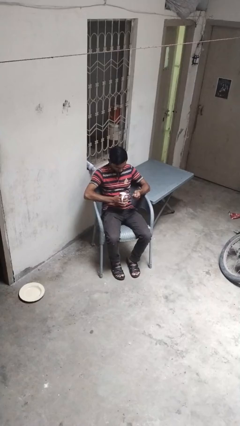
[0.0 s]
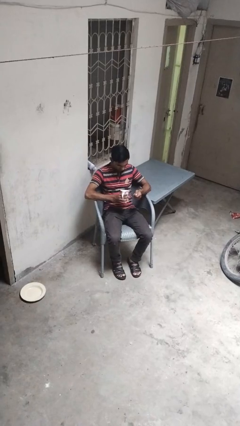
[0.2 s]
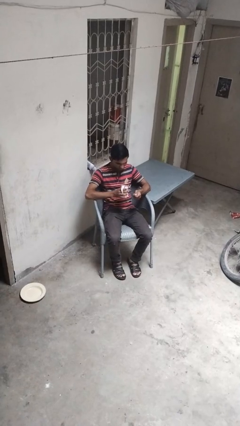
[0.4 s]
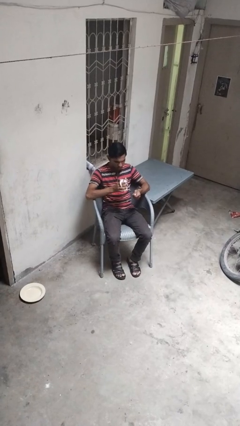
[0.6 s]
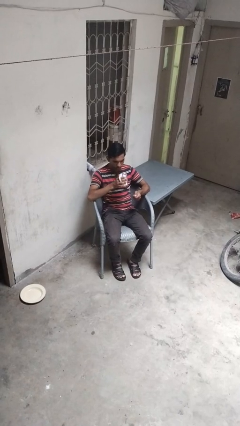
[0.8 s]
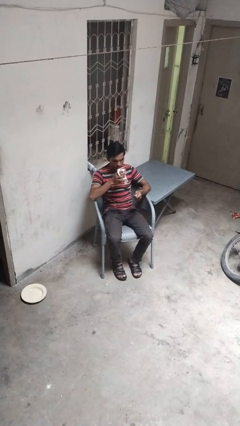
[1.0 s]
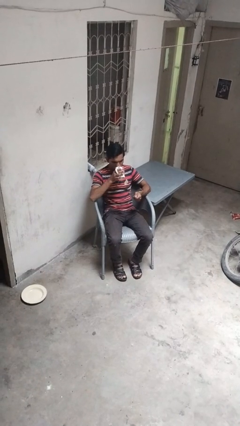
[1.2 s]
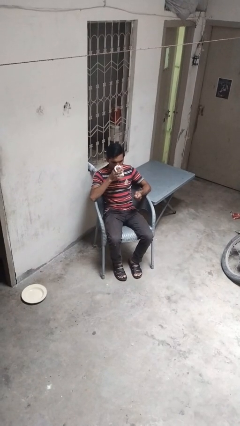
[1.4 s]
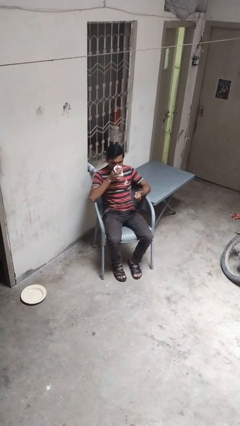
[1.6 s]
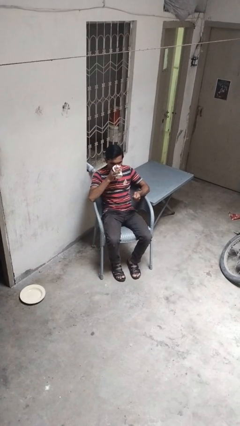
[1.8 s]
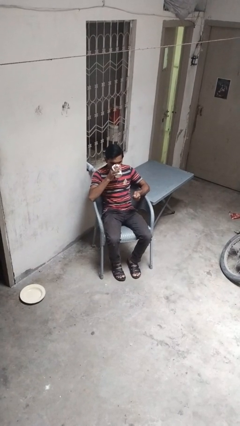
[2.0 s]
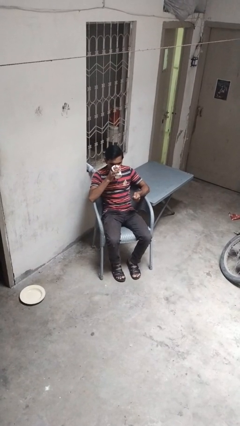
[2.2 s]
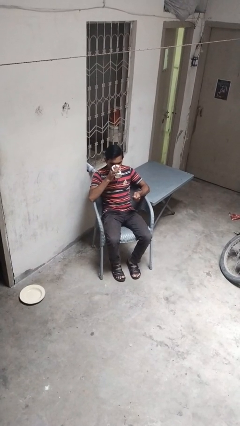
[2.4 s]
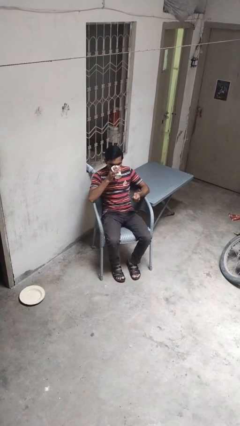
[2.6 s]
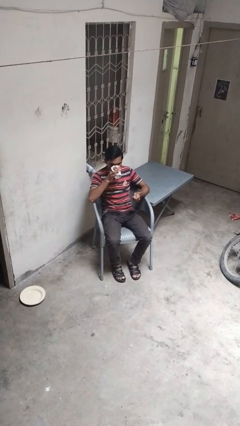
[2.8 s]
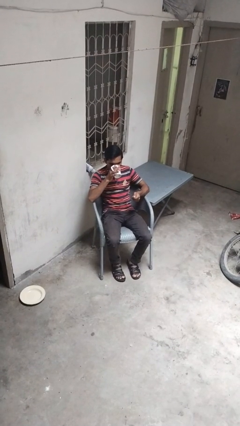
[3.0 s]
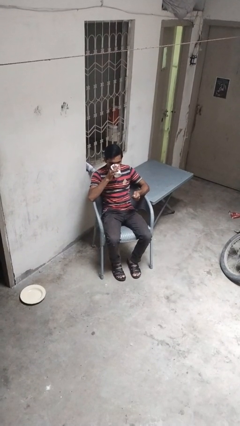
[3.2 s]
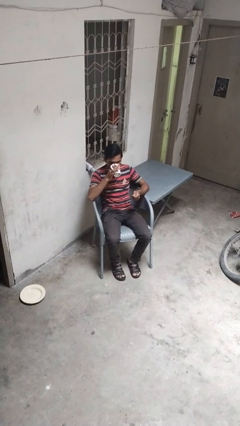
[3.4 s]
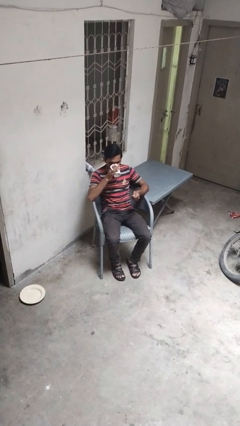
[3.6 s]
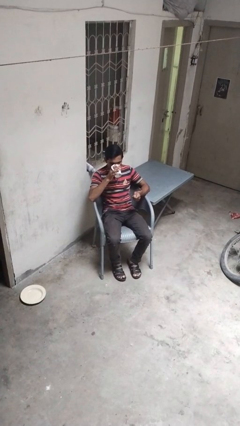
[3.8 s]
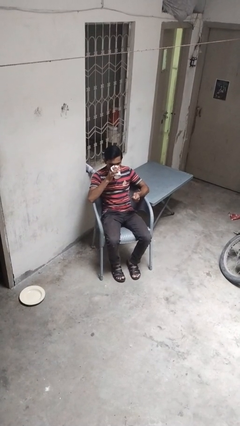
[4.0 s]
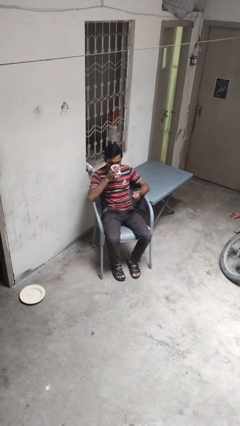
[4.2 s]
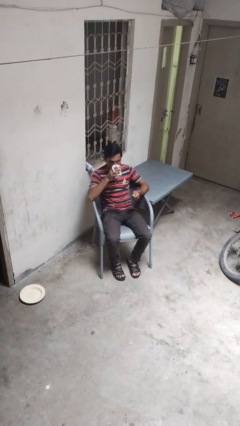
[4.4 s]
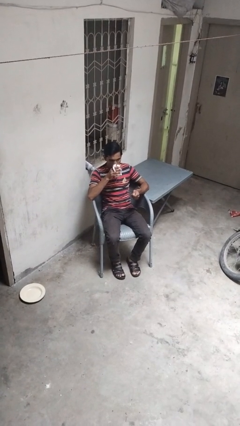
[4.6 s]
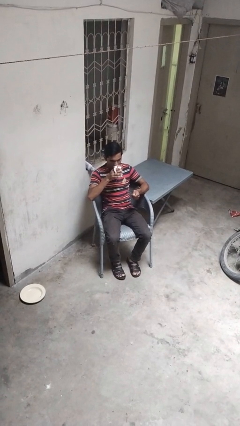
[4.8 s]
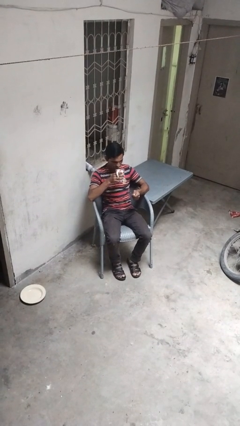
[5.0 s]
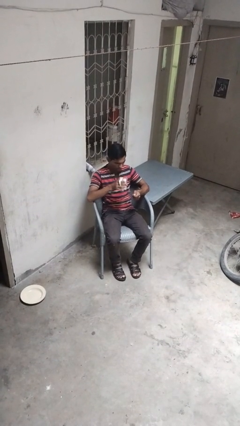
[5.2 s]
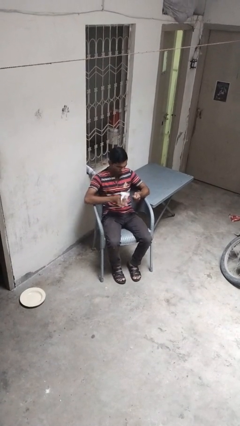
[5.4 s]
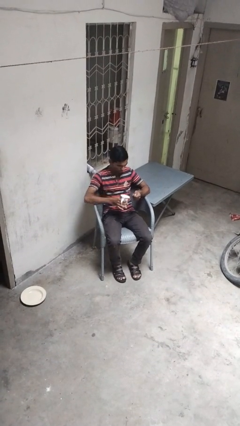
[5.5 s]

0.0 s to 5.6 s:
person drinks from mug

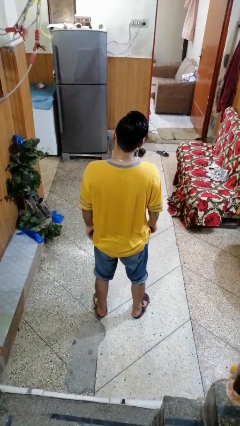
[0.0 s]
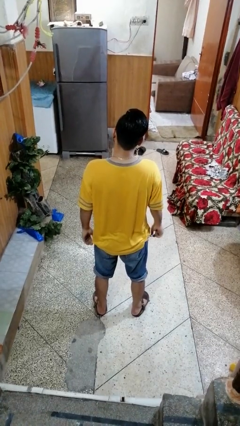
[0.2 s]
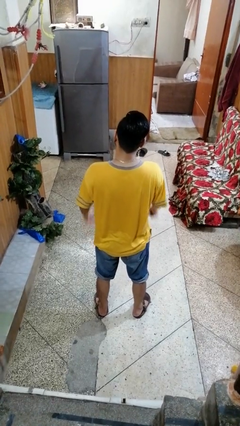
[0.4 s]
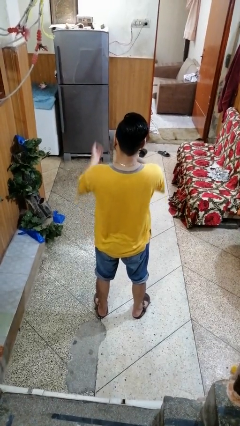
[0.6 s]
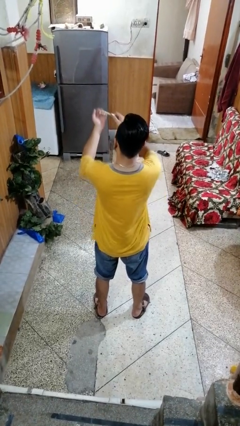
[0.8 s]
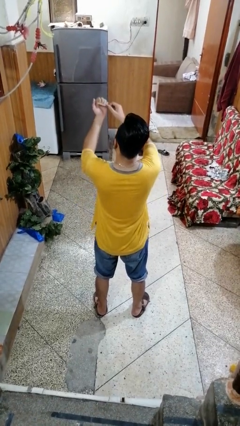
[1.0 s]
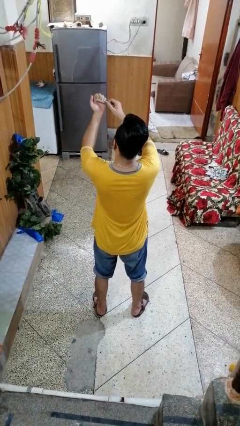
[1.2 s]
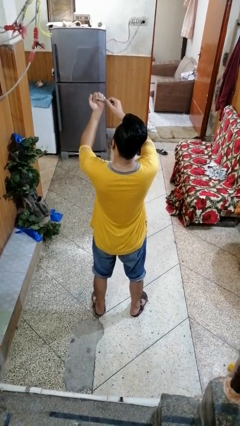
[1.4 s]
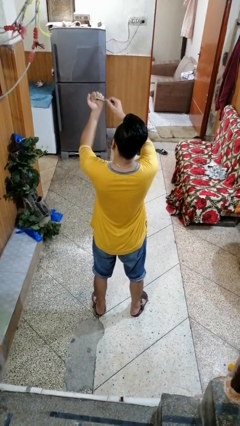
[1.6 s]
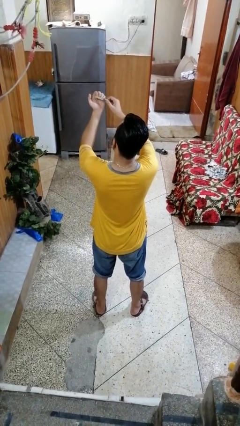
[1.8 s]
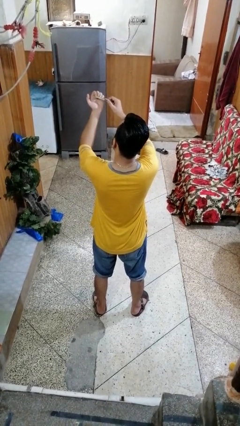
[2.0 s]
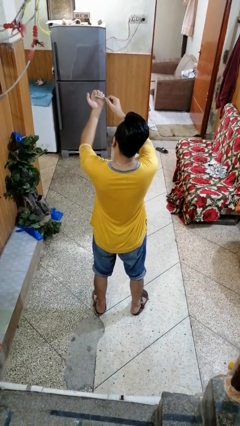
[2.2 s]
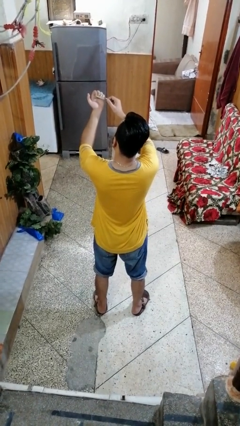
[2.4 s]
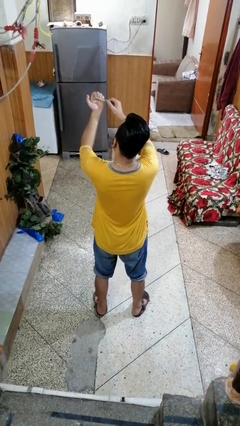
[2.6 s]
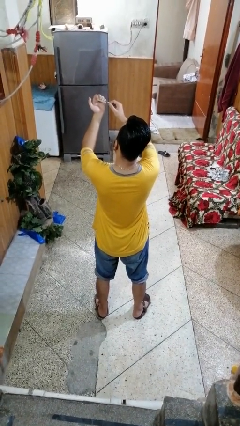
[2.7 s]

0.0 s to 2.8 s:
person files fingernails

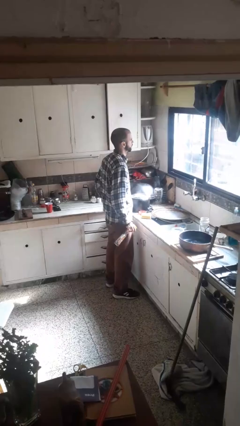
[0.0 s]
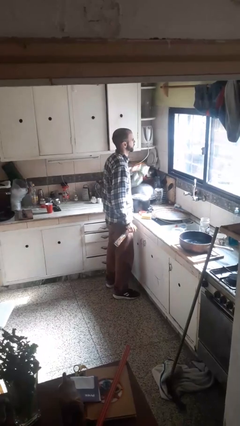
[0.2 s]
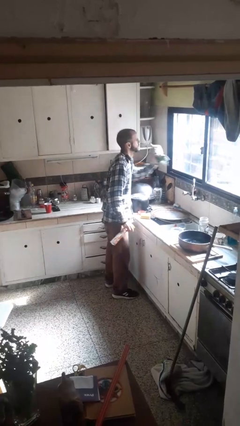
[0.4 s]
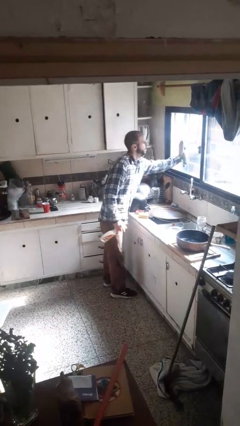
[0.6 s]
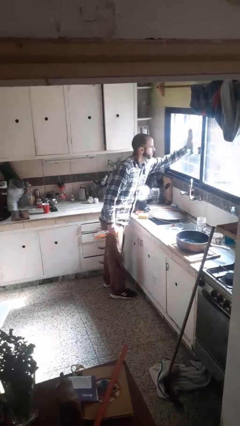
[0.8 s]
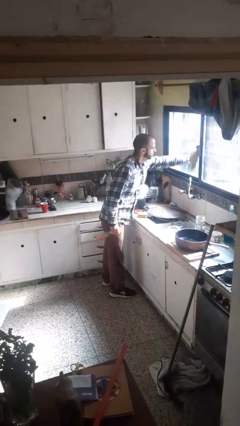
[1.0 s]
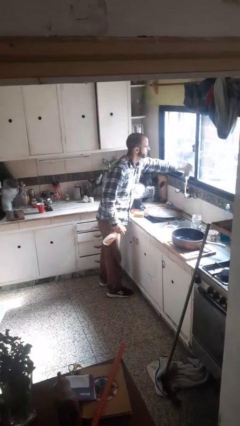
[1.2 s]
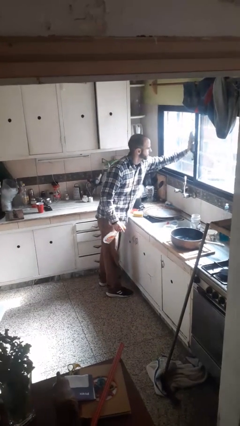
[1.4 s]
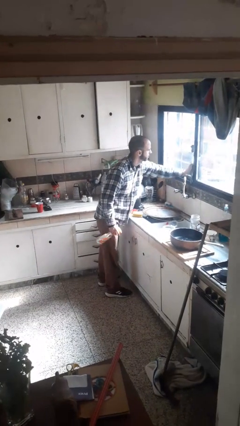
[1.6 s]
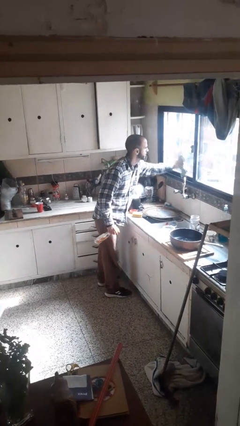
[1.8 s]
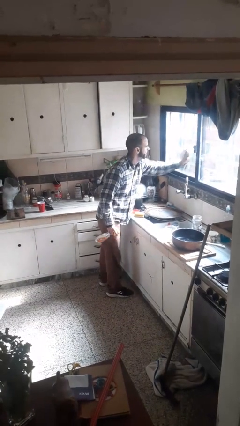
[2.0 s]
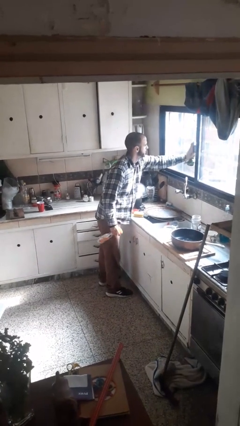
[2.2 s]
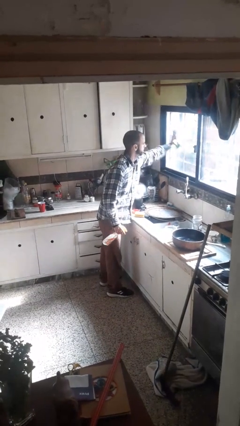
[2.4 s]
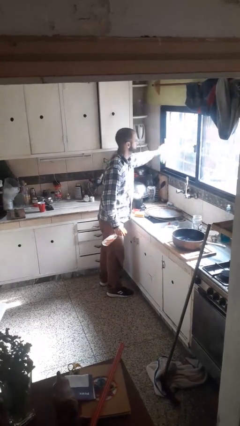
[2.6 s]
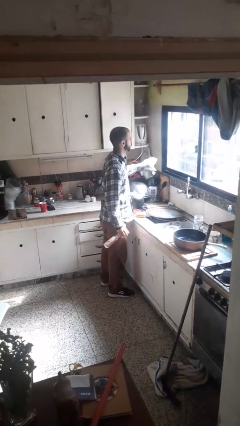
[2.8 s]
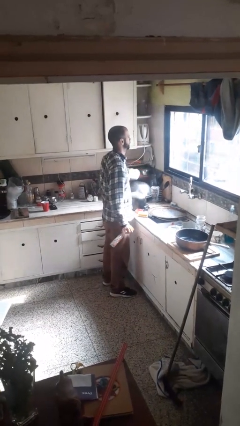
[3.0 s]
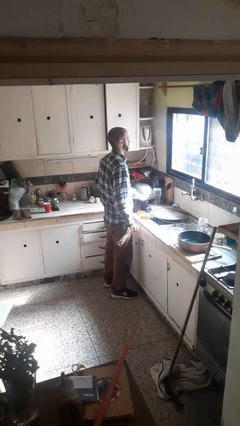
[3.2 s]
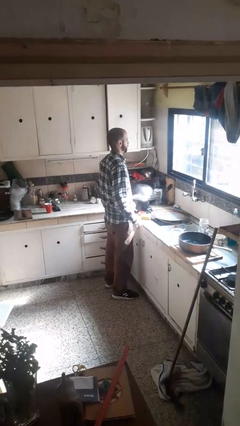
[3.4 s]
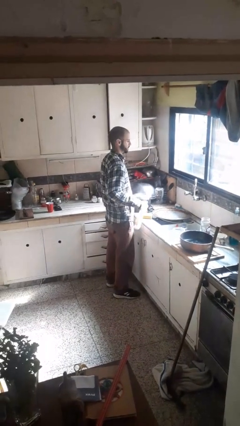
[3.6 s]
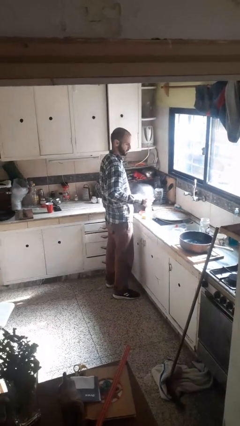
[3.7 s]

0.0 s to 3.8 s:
person washes window

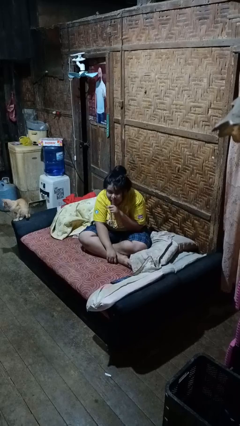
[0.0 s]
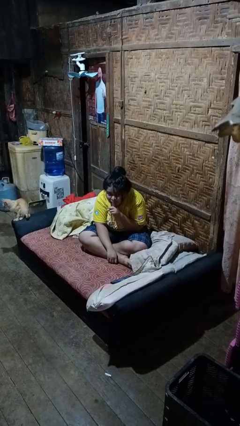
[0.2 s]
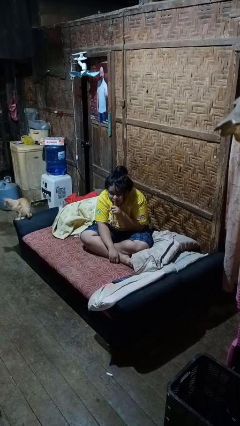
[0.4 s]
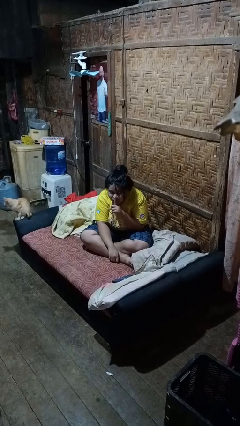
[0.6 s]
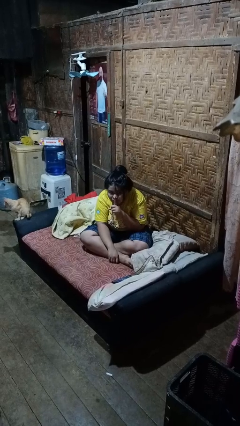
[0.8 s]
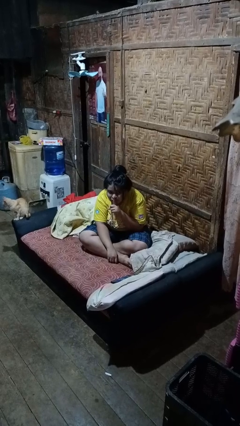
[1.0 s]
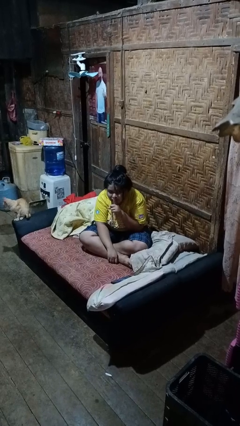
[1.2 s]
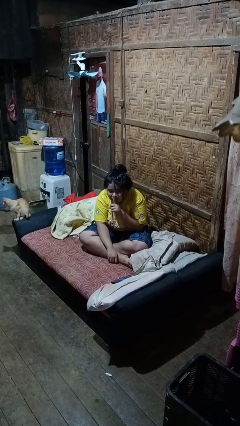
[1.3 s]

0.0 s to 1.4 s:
person gestures be quiet

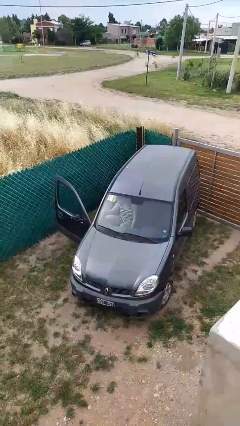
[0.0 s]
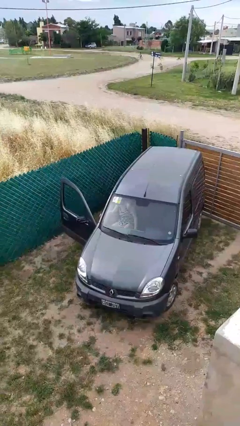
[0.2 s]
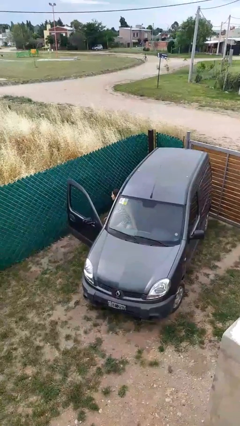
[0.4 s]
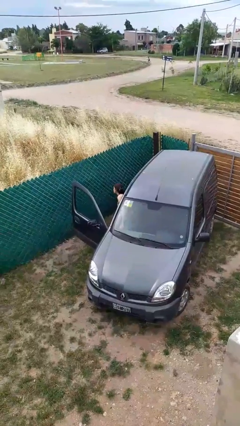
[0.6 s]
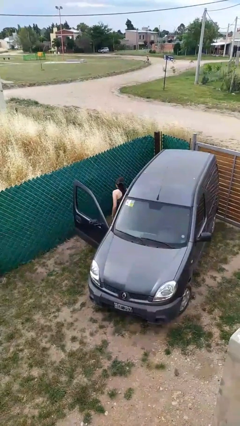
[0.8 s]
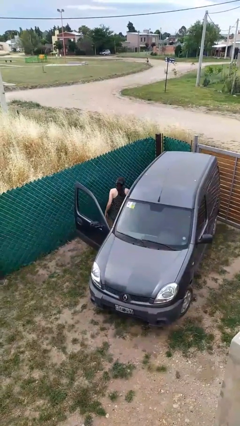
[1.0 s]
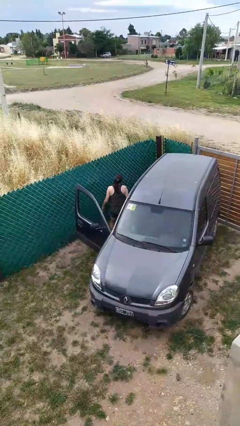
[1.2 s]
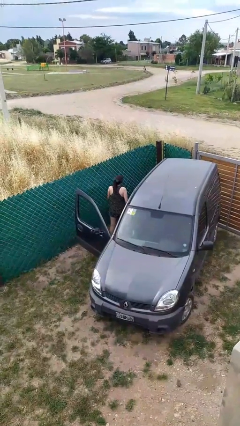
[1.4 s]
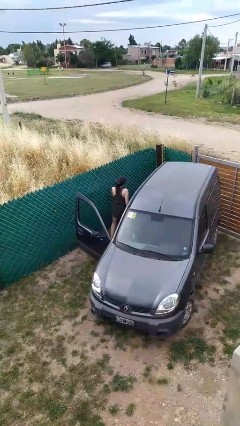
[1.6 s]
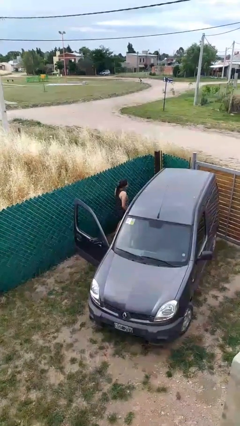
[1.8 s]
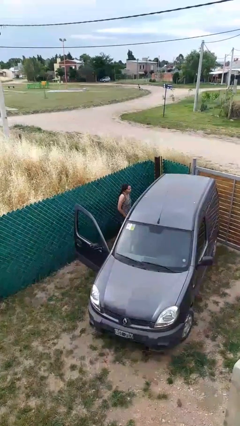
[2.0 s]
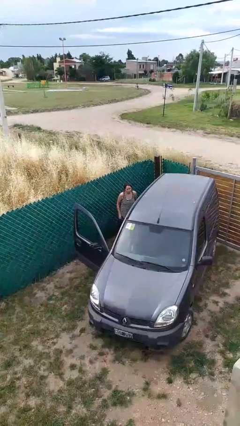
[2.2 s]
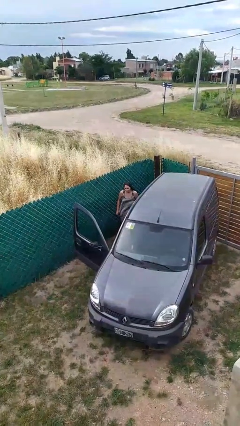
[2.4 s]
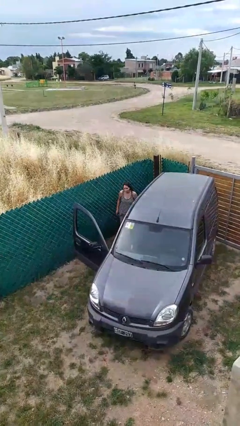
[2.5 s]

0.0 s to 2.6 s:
person exits car

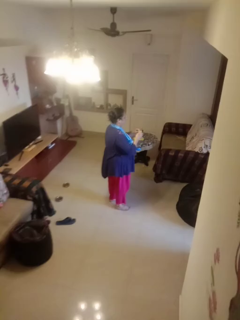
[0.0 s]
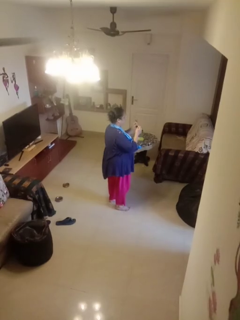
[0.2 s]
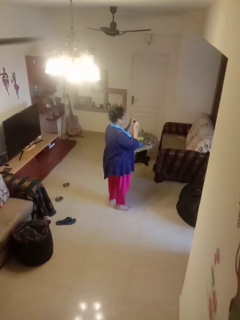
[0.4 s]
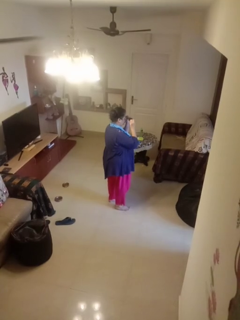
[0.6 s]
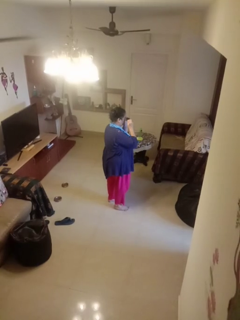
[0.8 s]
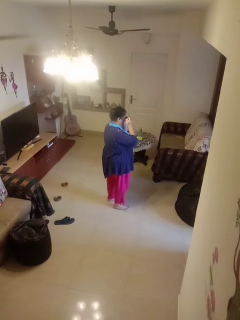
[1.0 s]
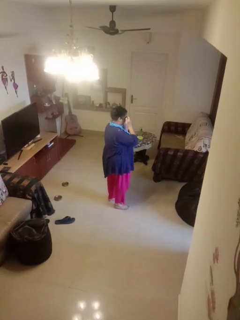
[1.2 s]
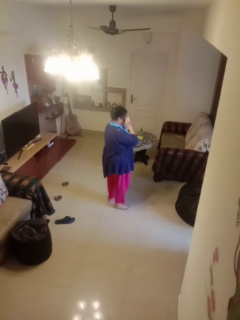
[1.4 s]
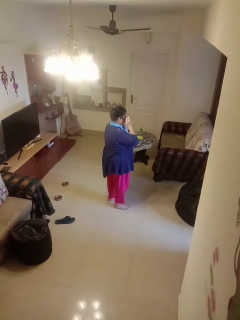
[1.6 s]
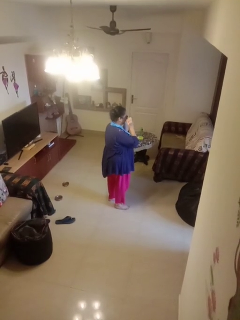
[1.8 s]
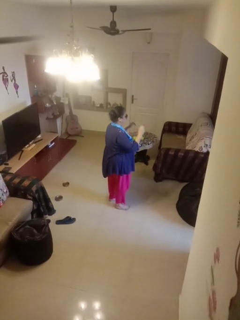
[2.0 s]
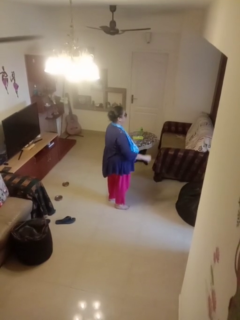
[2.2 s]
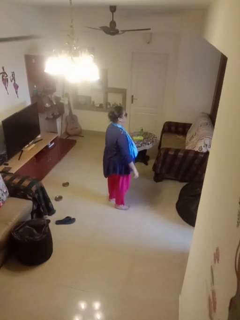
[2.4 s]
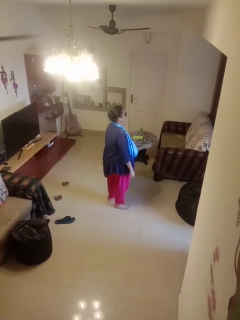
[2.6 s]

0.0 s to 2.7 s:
person puts on sunglasses
